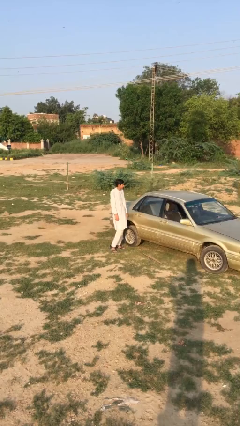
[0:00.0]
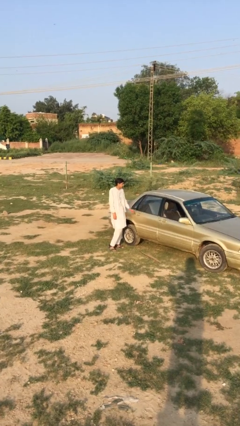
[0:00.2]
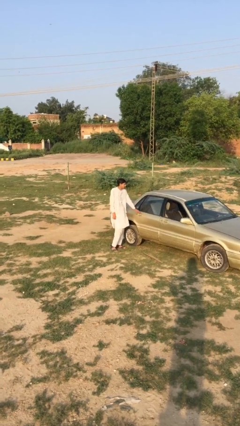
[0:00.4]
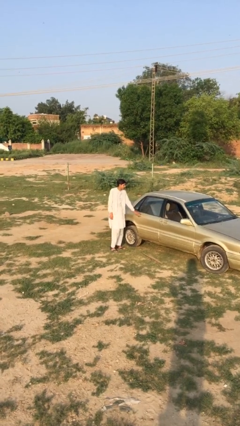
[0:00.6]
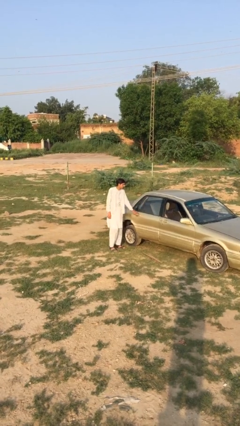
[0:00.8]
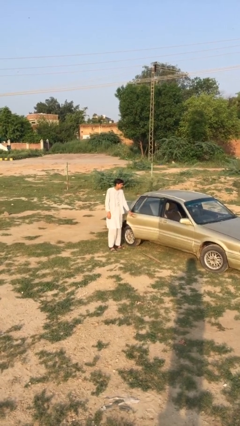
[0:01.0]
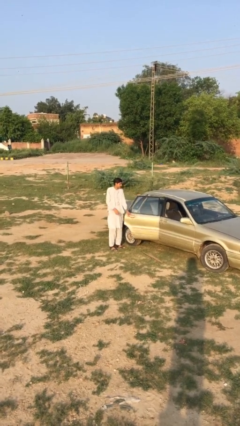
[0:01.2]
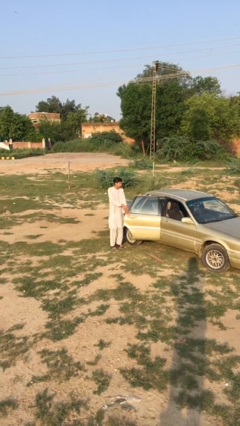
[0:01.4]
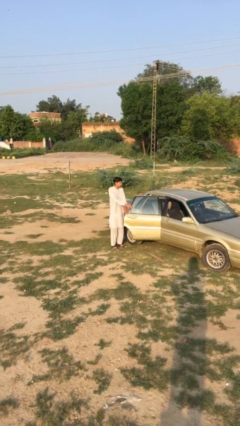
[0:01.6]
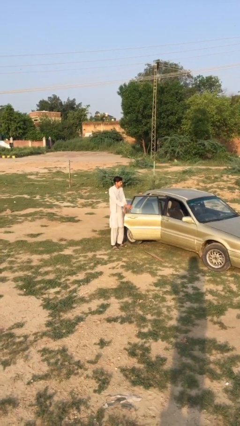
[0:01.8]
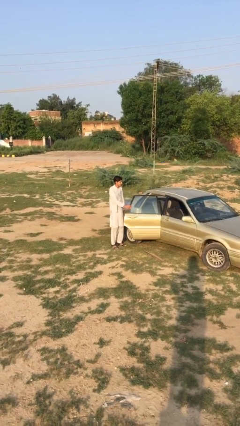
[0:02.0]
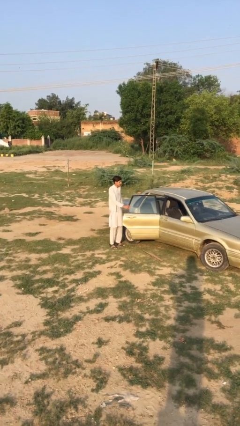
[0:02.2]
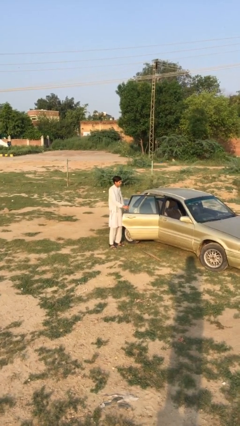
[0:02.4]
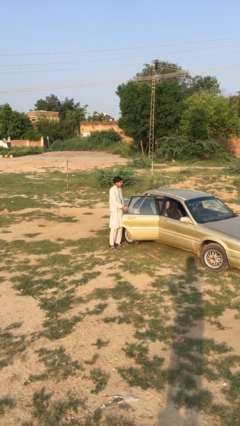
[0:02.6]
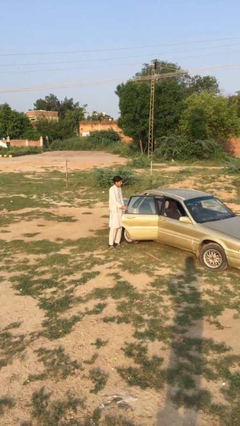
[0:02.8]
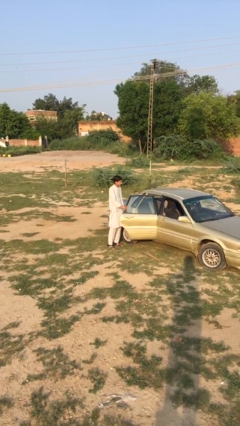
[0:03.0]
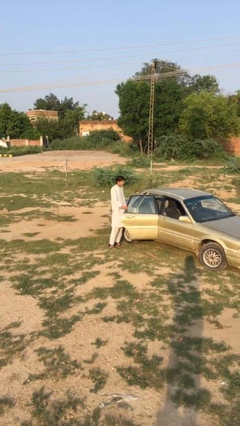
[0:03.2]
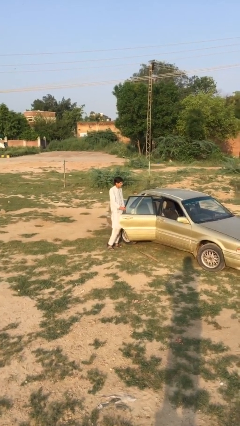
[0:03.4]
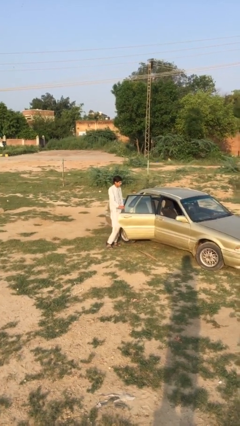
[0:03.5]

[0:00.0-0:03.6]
person opens car door

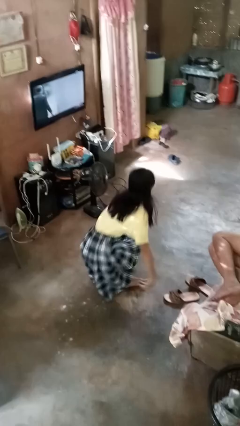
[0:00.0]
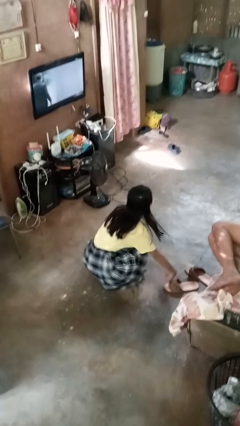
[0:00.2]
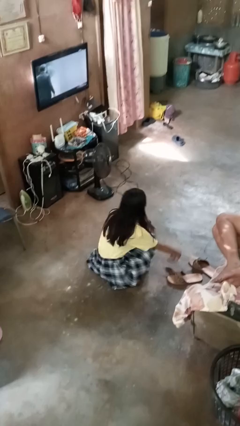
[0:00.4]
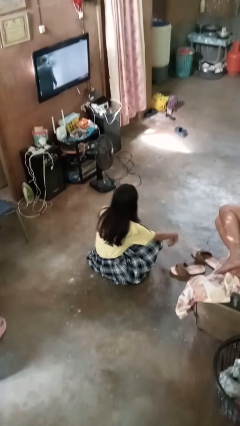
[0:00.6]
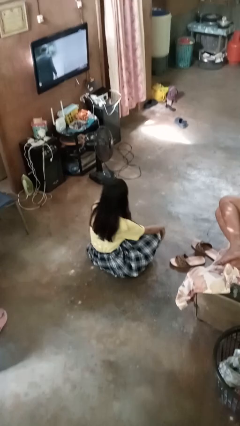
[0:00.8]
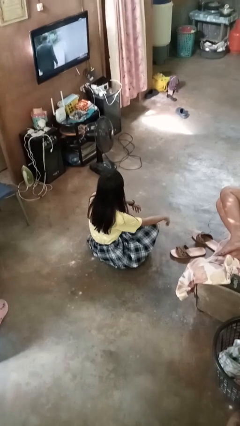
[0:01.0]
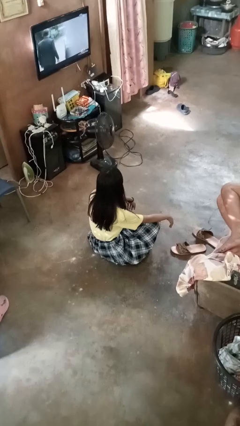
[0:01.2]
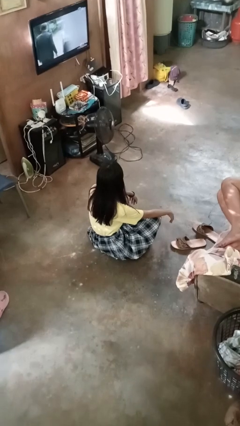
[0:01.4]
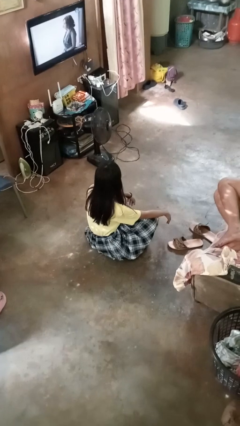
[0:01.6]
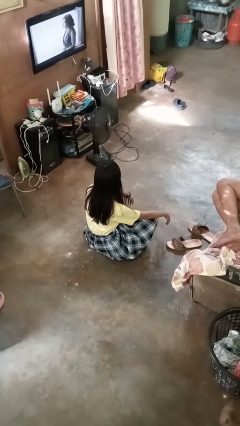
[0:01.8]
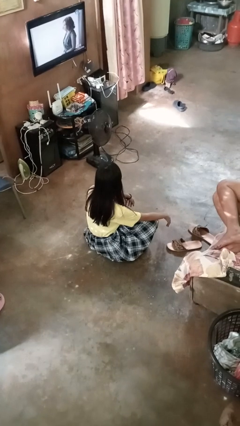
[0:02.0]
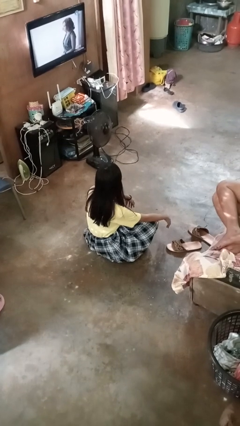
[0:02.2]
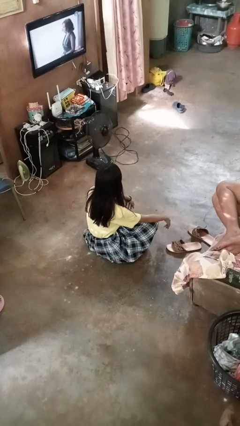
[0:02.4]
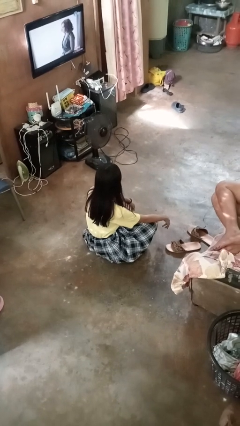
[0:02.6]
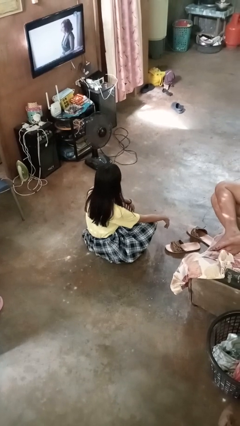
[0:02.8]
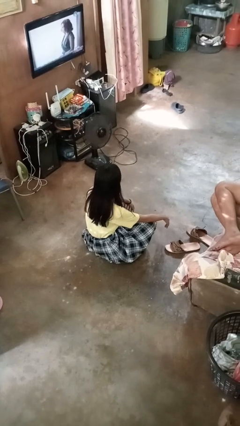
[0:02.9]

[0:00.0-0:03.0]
person sits crisscross

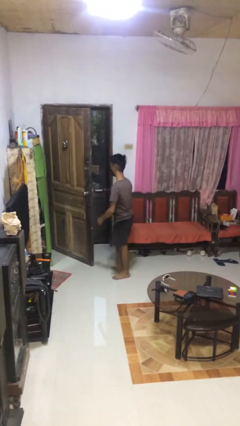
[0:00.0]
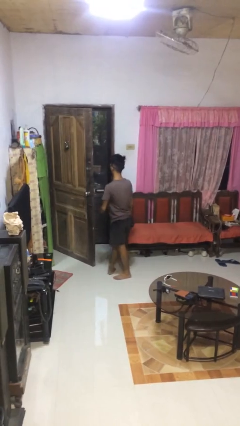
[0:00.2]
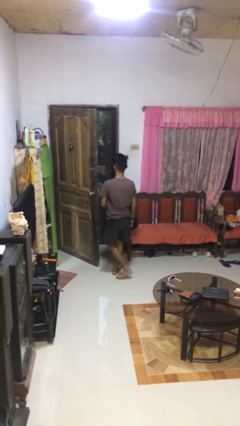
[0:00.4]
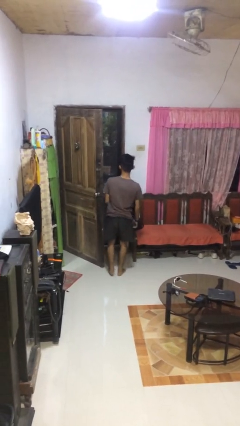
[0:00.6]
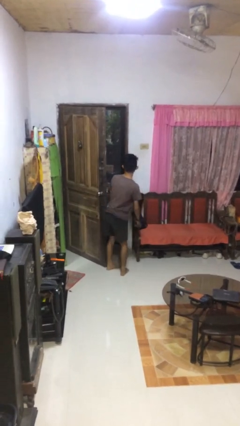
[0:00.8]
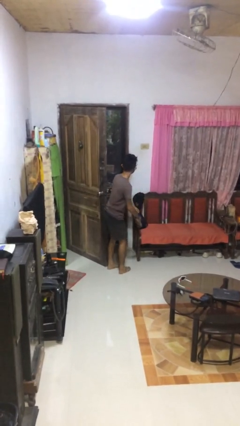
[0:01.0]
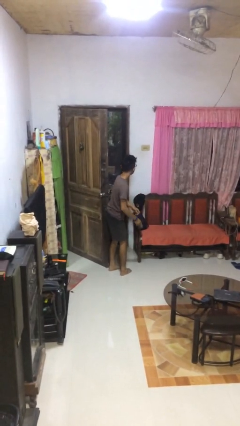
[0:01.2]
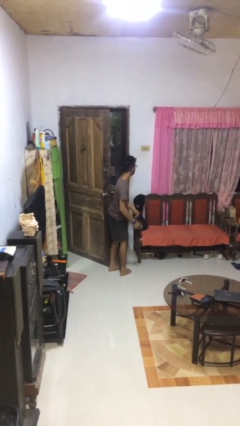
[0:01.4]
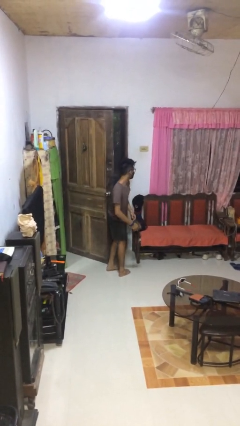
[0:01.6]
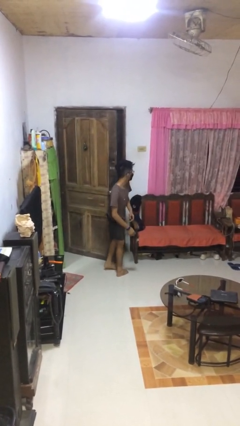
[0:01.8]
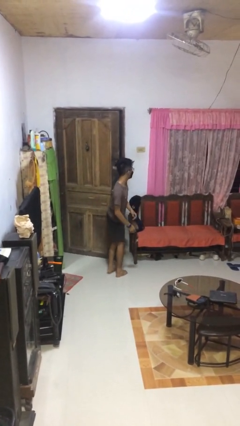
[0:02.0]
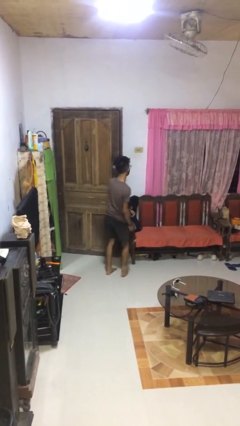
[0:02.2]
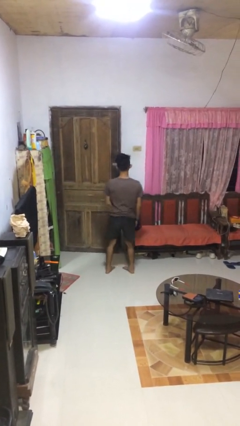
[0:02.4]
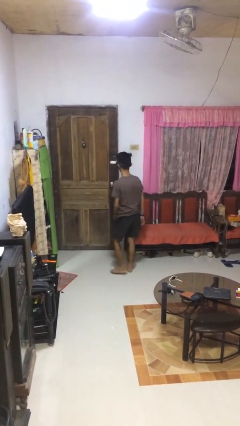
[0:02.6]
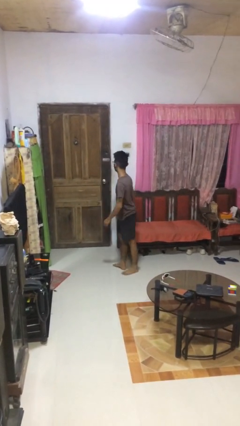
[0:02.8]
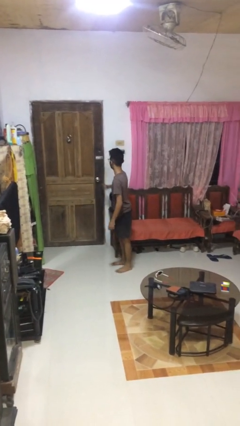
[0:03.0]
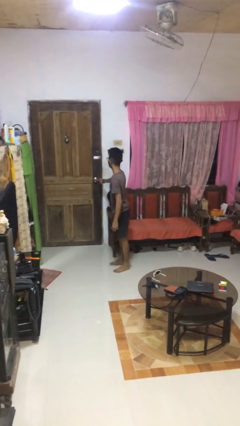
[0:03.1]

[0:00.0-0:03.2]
person closes door with hip

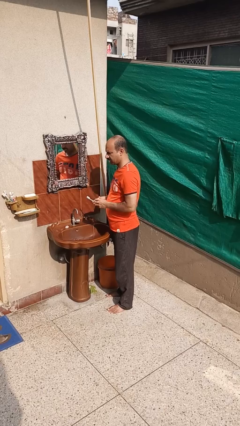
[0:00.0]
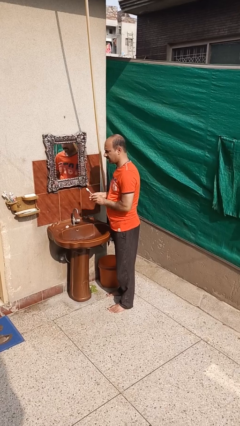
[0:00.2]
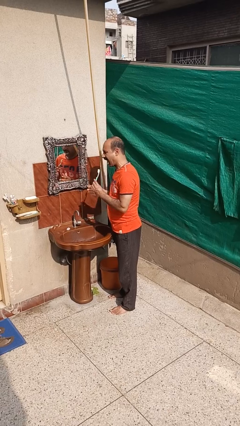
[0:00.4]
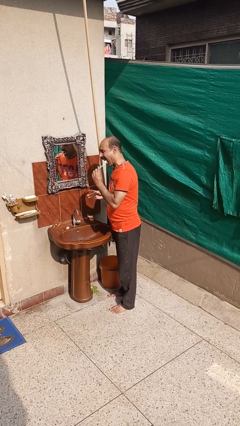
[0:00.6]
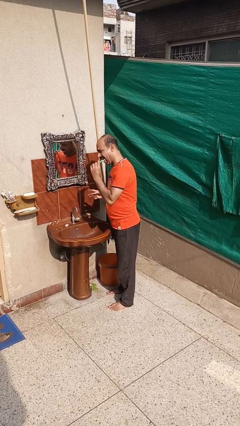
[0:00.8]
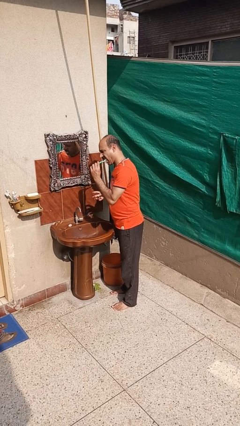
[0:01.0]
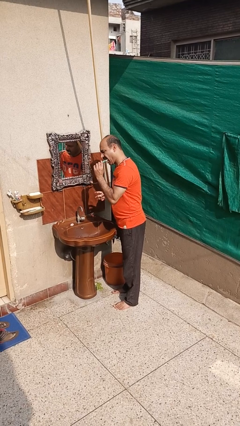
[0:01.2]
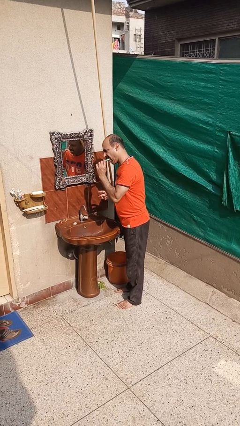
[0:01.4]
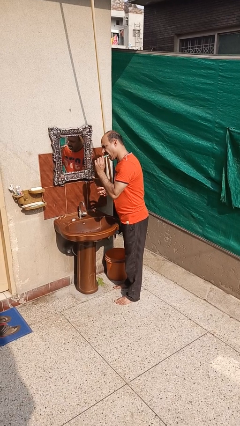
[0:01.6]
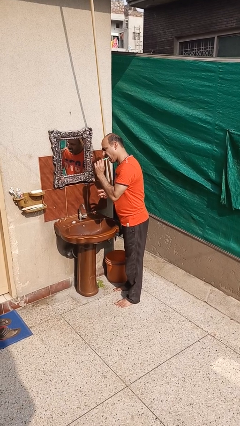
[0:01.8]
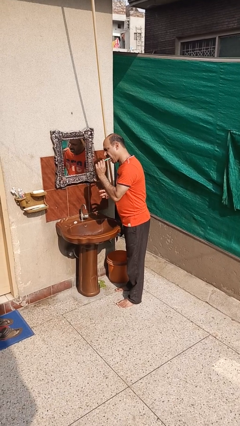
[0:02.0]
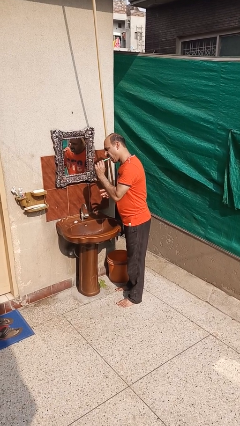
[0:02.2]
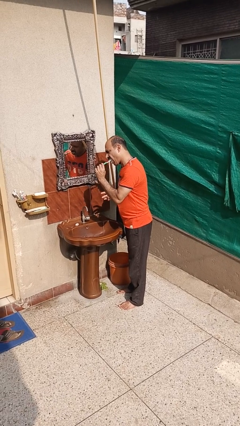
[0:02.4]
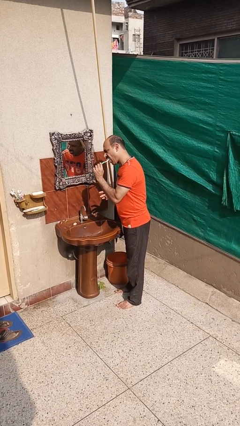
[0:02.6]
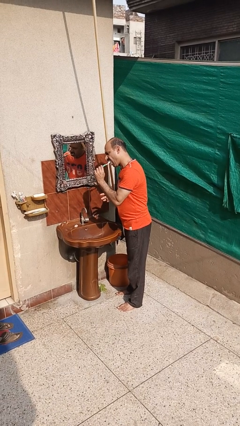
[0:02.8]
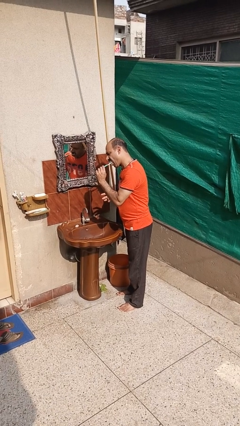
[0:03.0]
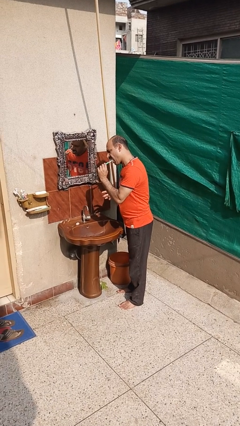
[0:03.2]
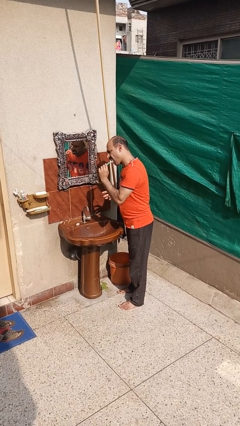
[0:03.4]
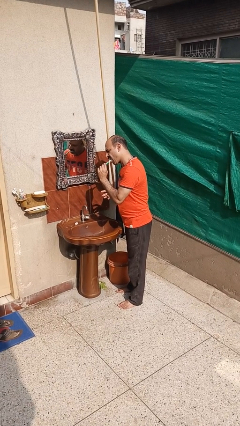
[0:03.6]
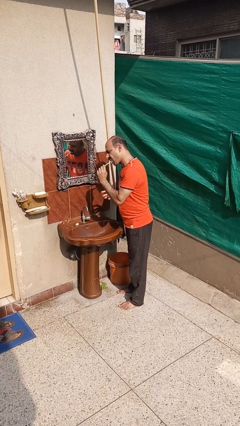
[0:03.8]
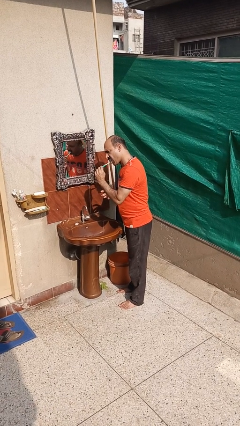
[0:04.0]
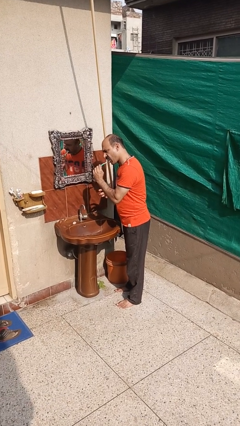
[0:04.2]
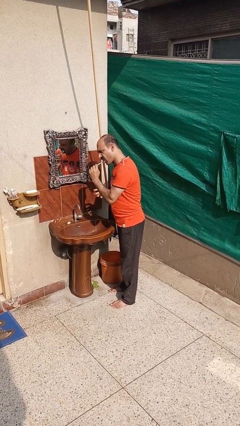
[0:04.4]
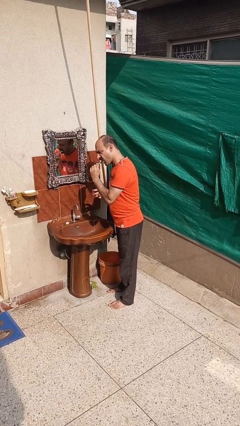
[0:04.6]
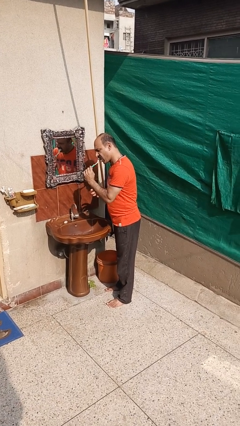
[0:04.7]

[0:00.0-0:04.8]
person brushes teeth

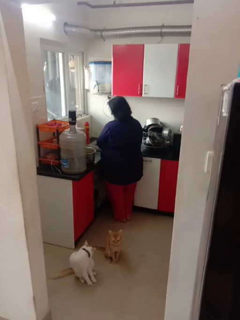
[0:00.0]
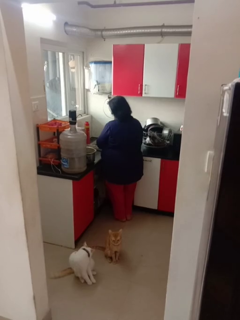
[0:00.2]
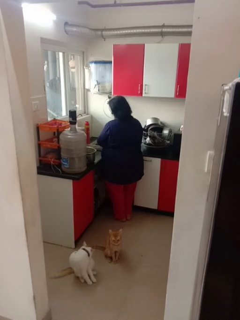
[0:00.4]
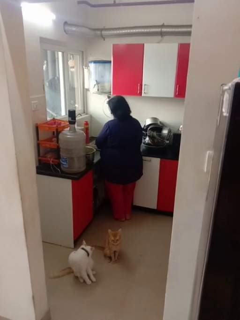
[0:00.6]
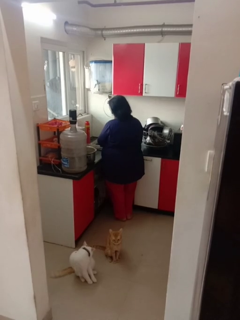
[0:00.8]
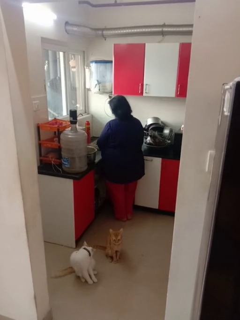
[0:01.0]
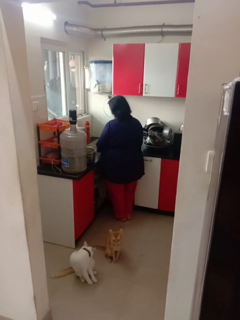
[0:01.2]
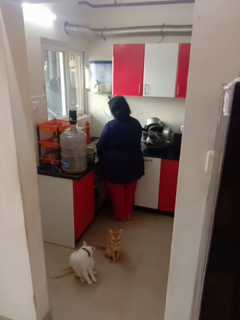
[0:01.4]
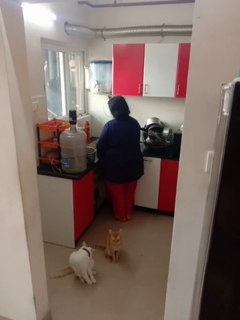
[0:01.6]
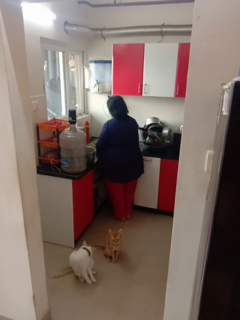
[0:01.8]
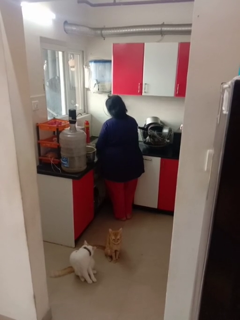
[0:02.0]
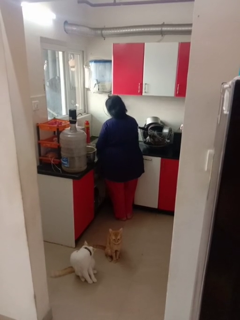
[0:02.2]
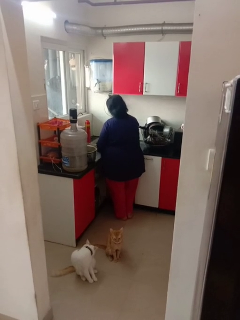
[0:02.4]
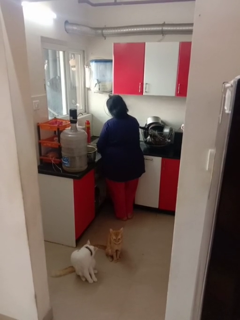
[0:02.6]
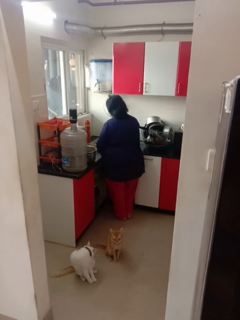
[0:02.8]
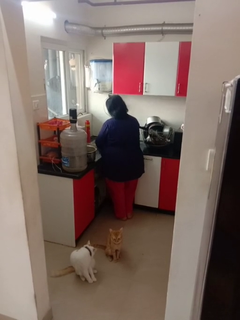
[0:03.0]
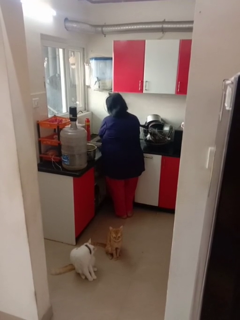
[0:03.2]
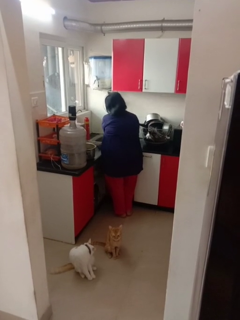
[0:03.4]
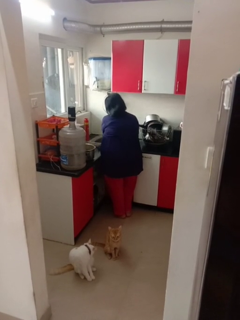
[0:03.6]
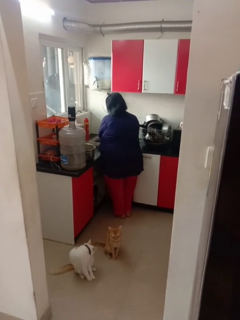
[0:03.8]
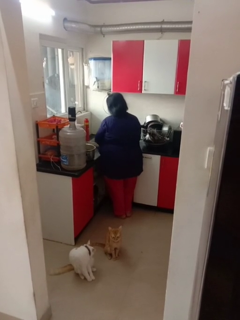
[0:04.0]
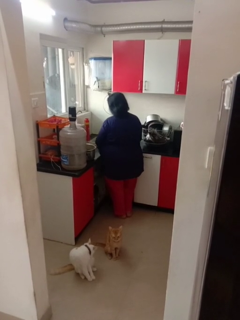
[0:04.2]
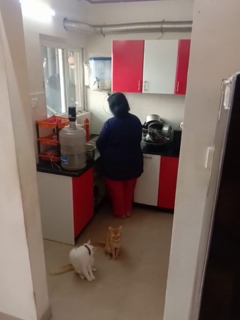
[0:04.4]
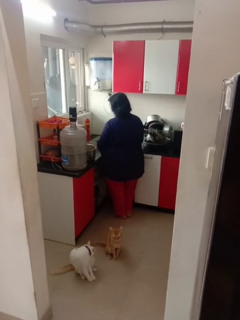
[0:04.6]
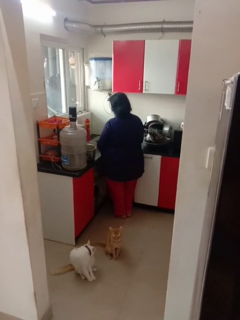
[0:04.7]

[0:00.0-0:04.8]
person washes dish
